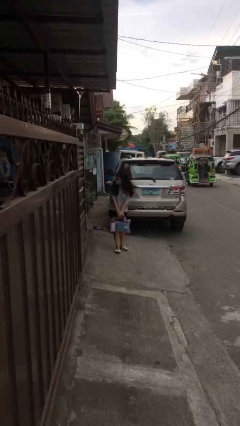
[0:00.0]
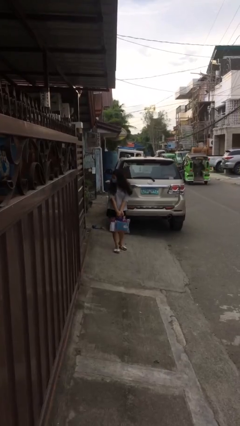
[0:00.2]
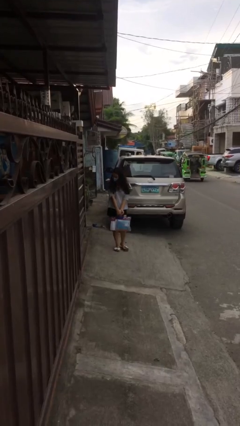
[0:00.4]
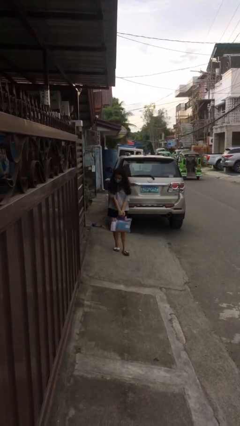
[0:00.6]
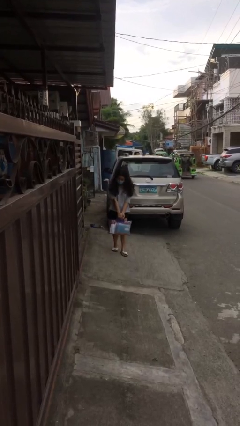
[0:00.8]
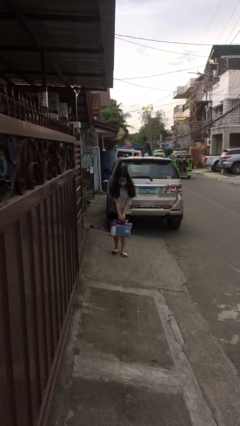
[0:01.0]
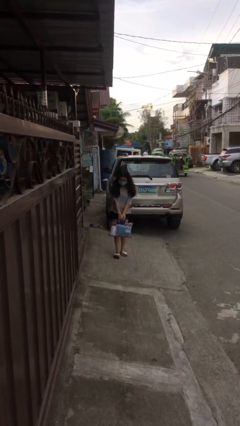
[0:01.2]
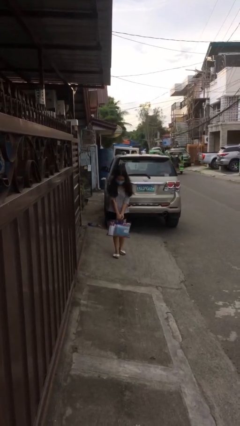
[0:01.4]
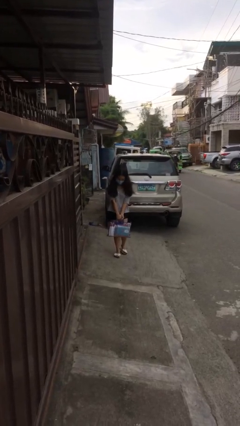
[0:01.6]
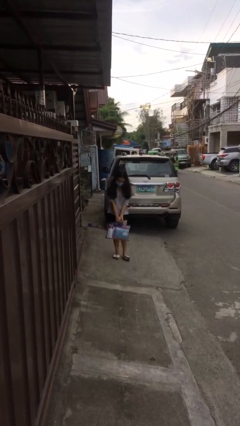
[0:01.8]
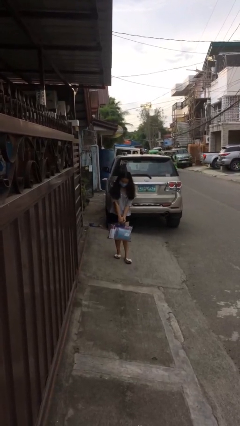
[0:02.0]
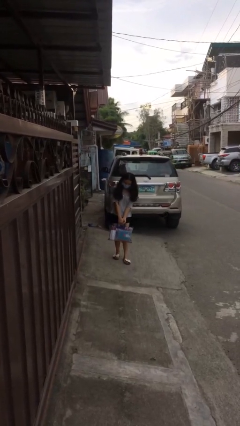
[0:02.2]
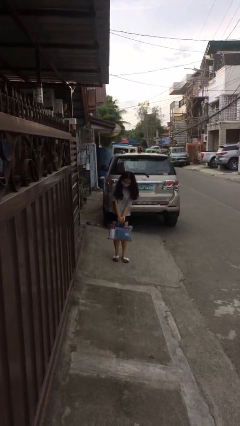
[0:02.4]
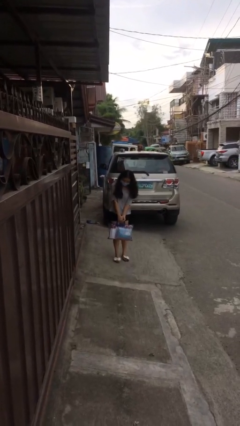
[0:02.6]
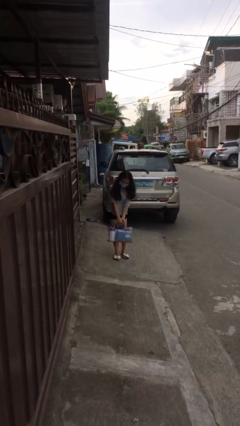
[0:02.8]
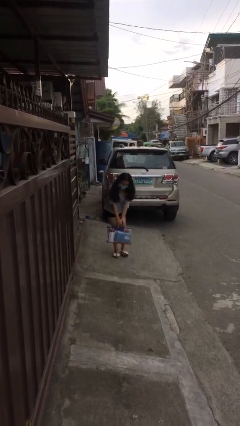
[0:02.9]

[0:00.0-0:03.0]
person carries heavy object

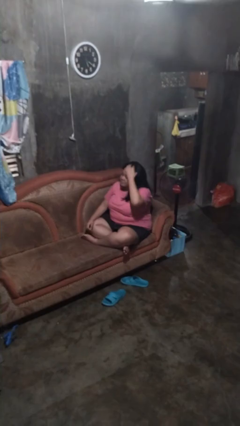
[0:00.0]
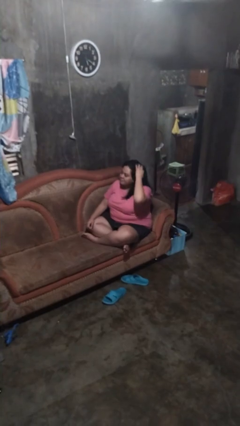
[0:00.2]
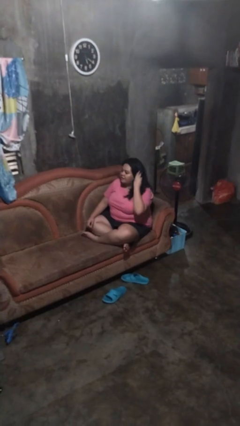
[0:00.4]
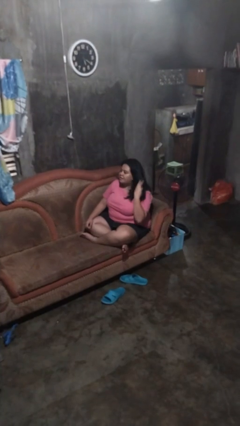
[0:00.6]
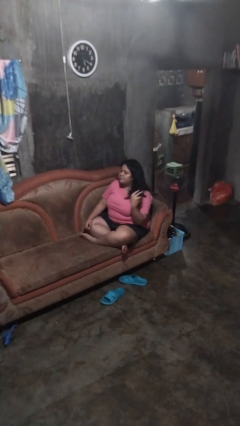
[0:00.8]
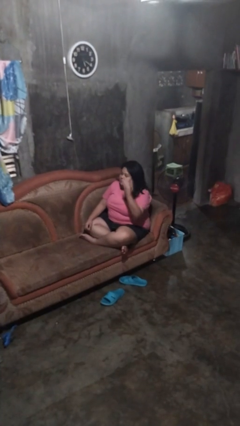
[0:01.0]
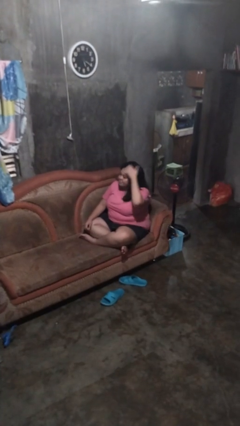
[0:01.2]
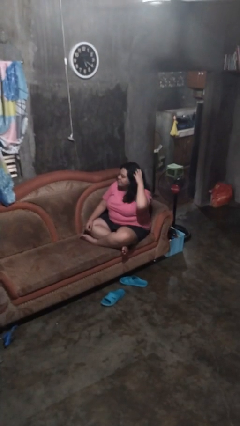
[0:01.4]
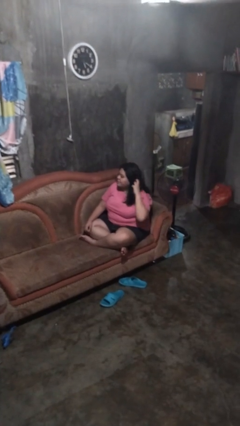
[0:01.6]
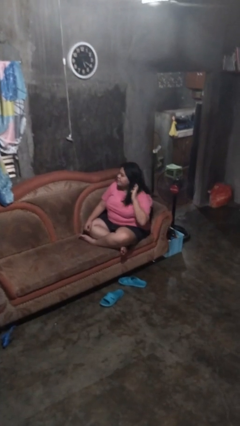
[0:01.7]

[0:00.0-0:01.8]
person strokes hair

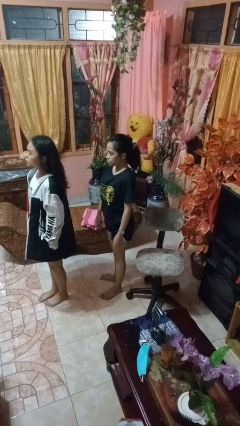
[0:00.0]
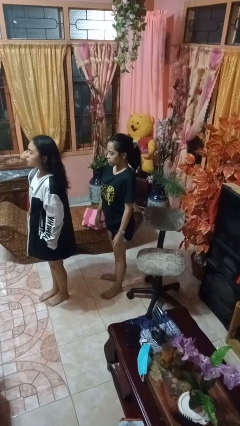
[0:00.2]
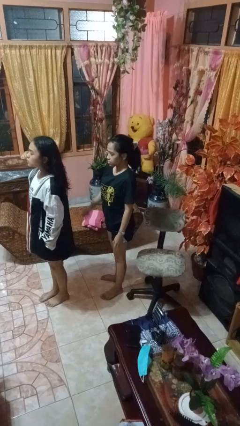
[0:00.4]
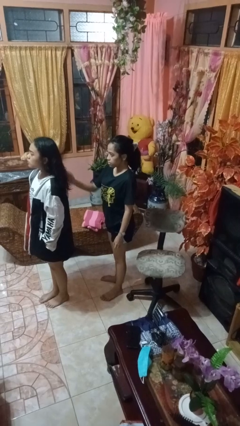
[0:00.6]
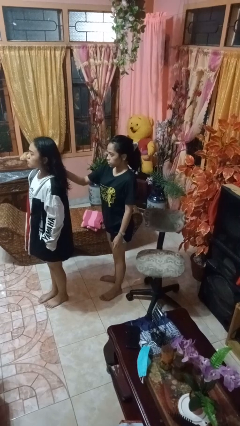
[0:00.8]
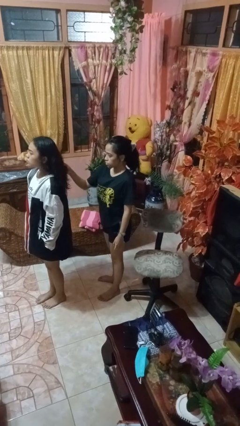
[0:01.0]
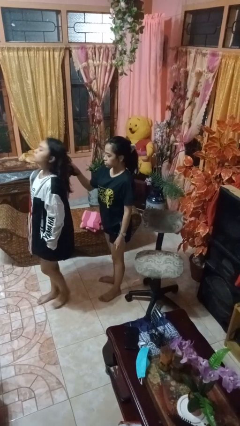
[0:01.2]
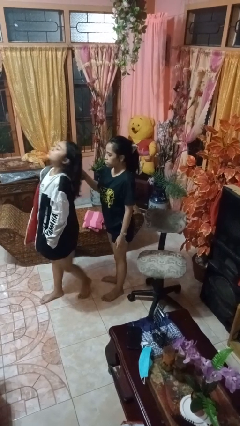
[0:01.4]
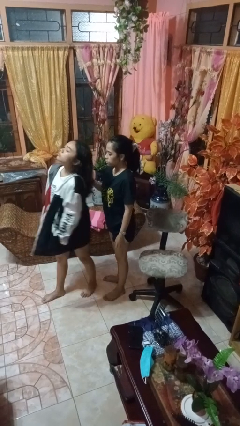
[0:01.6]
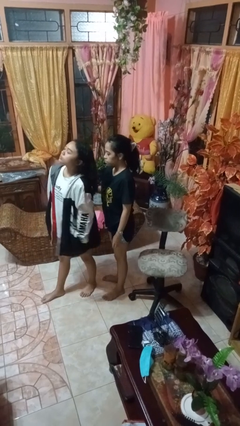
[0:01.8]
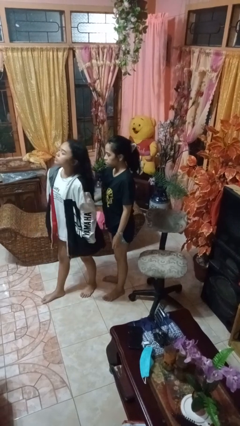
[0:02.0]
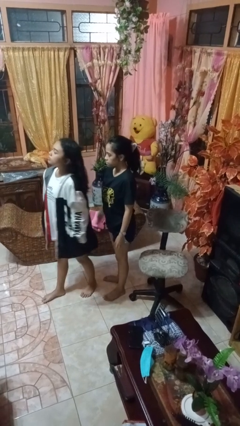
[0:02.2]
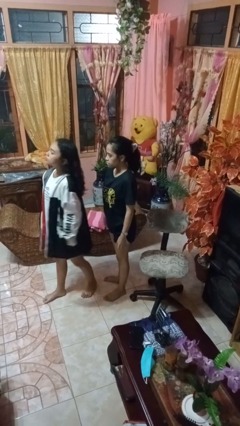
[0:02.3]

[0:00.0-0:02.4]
person grabs person by hair

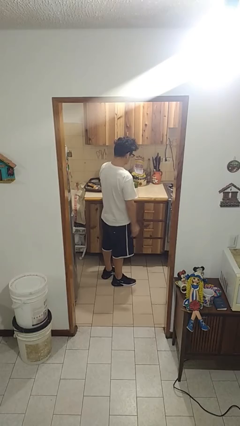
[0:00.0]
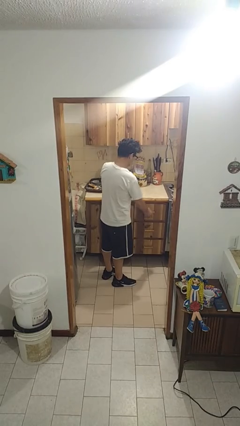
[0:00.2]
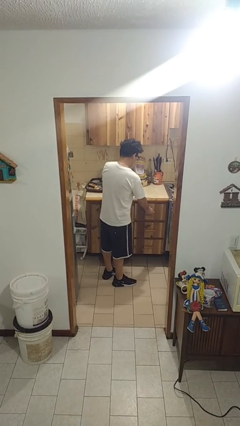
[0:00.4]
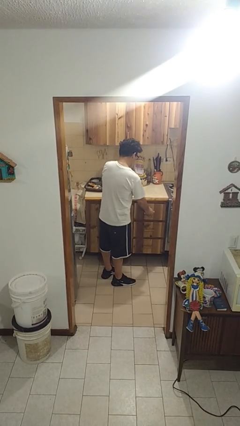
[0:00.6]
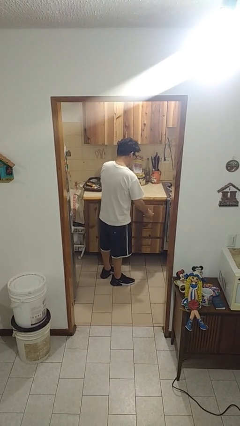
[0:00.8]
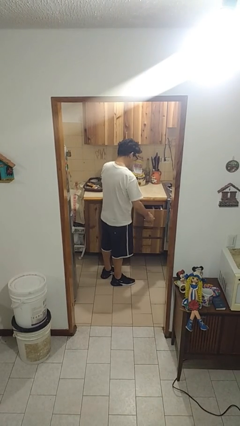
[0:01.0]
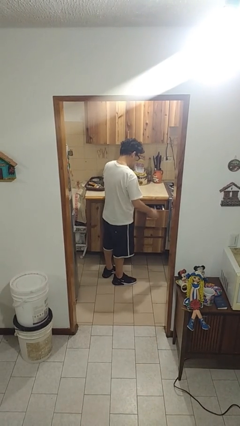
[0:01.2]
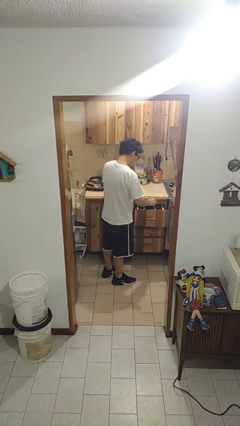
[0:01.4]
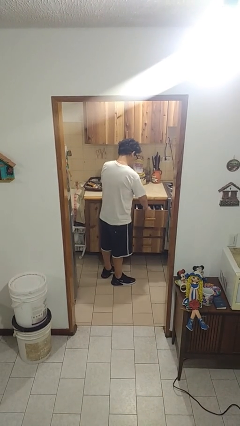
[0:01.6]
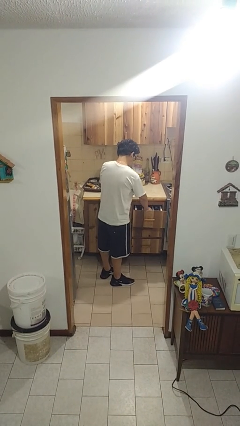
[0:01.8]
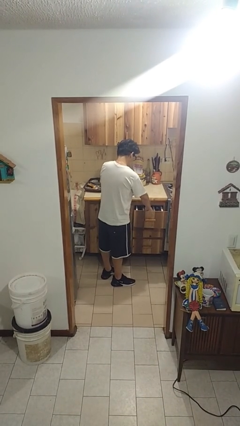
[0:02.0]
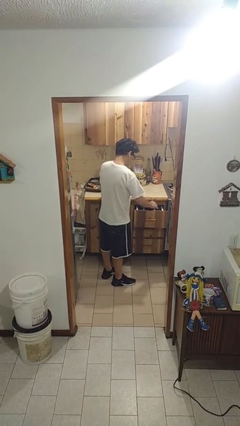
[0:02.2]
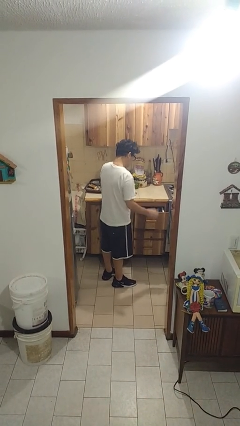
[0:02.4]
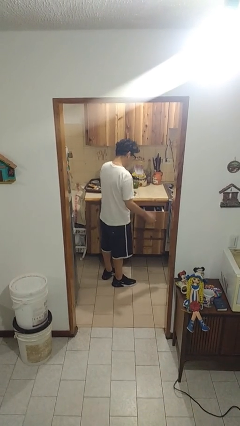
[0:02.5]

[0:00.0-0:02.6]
person searches in kitchen drawer

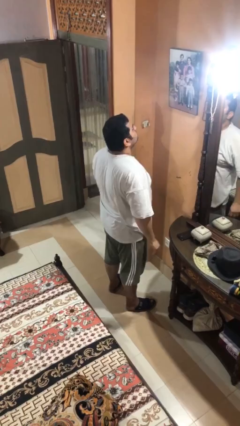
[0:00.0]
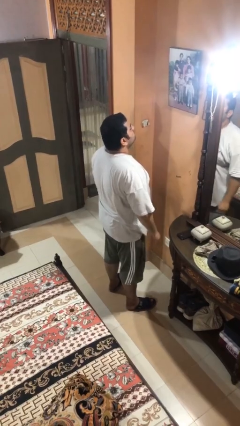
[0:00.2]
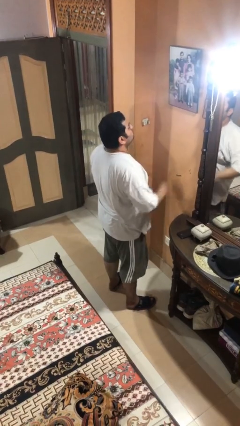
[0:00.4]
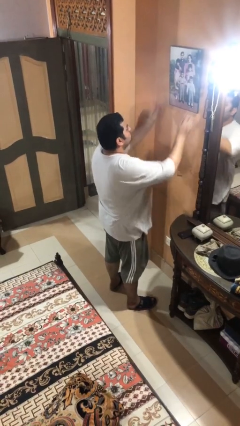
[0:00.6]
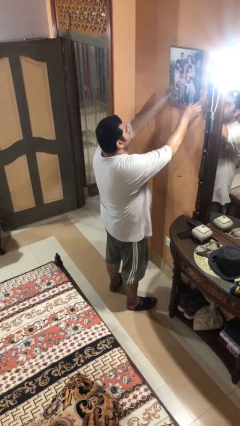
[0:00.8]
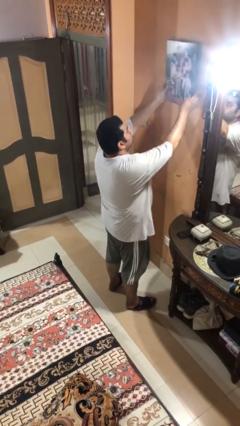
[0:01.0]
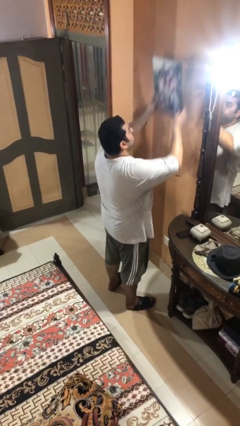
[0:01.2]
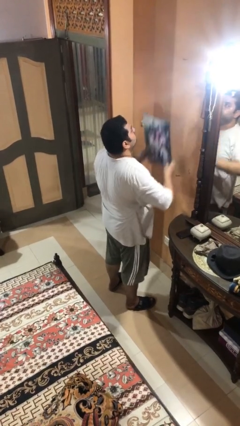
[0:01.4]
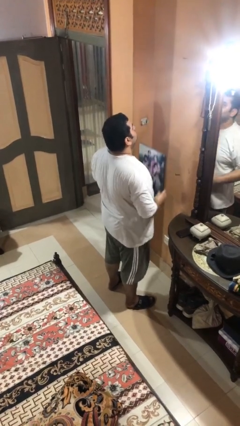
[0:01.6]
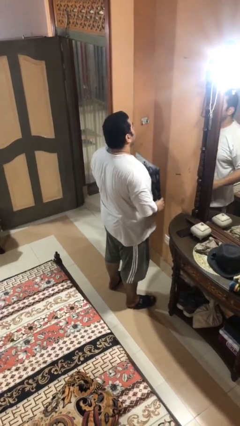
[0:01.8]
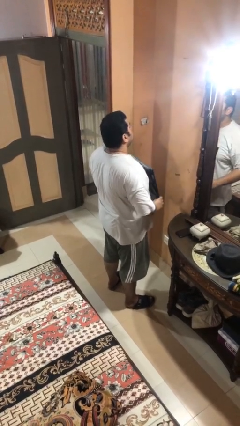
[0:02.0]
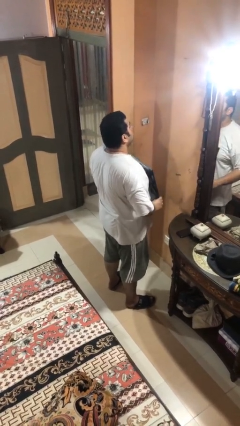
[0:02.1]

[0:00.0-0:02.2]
person takes down picture frame

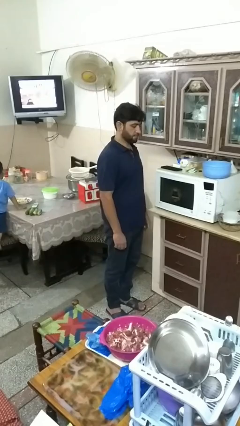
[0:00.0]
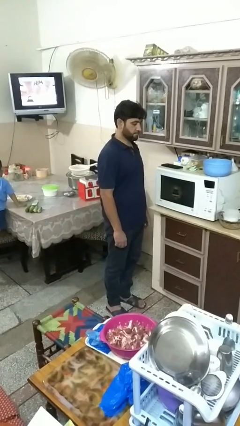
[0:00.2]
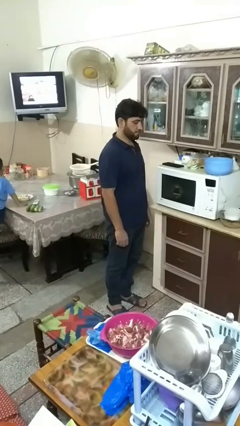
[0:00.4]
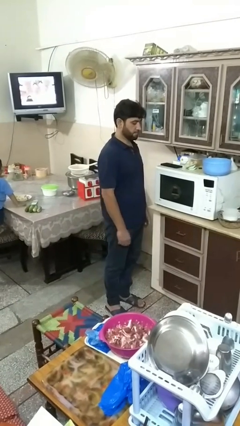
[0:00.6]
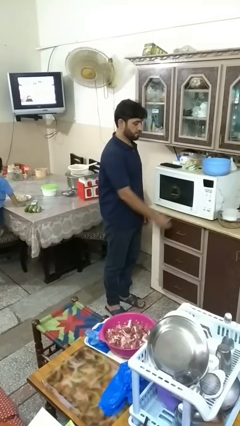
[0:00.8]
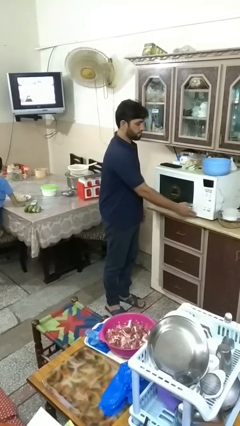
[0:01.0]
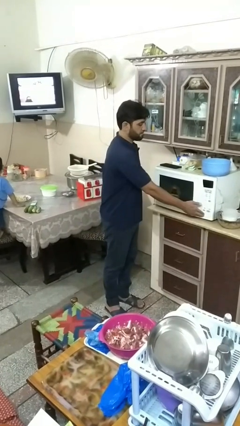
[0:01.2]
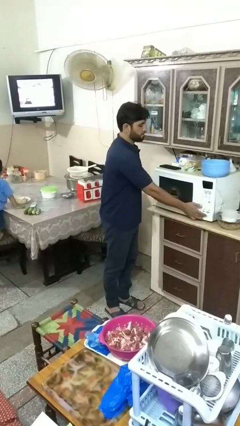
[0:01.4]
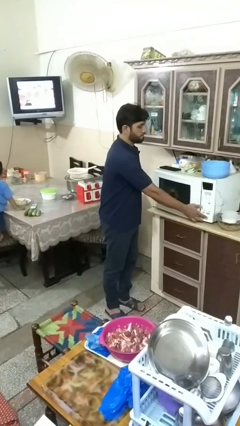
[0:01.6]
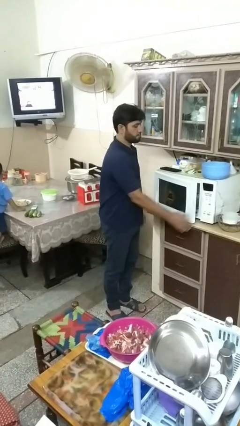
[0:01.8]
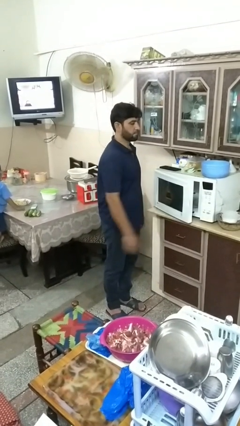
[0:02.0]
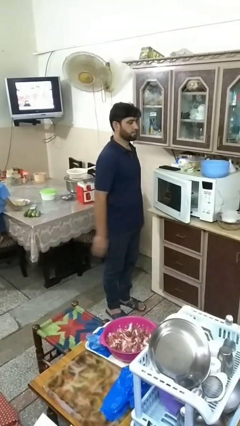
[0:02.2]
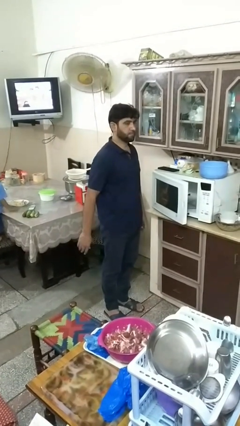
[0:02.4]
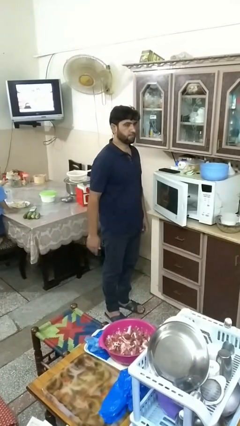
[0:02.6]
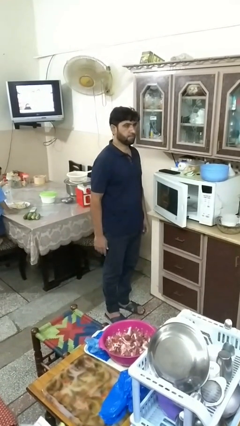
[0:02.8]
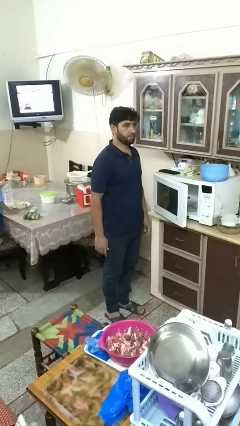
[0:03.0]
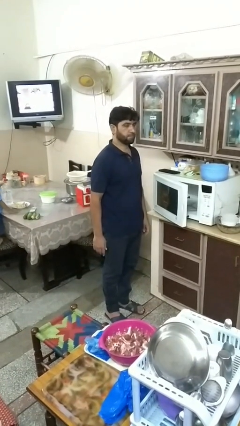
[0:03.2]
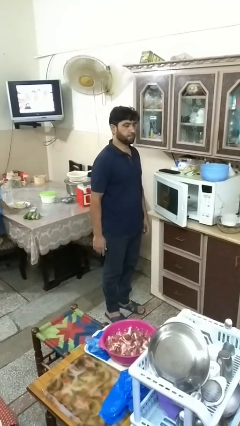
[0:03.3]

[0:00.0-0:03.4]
person opens oven door

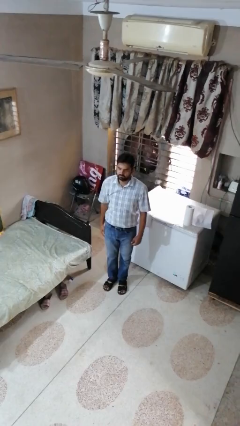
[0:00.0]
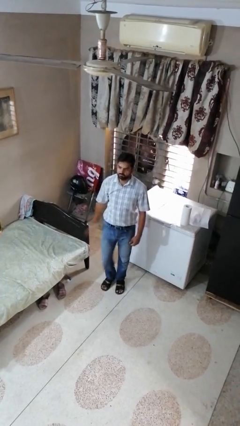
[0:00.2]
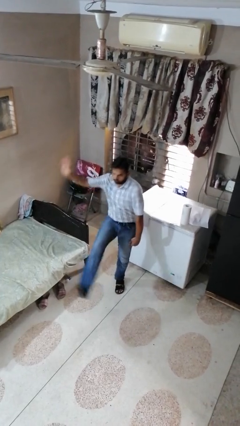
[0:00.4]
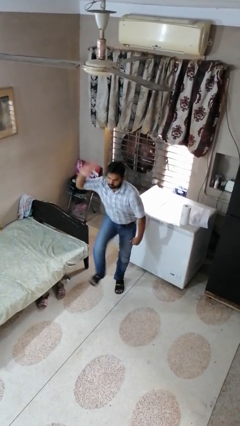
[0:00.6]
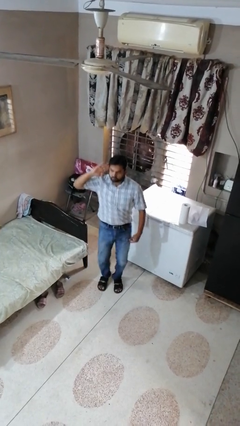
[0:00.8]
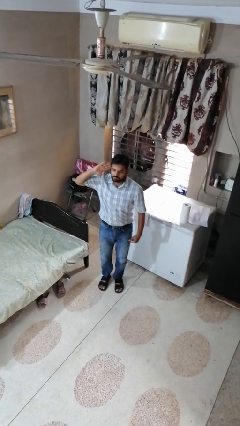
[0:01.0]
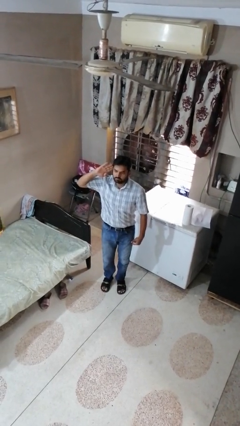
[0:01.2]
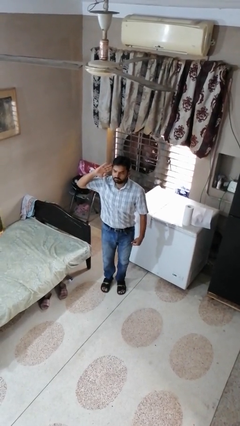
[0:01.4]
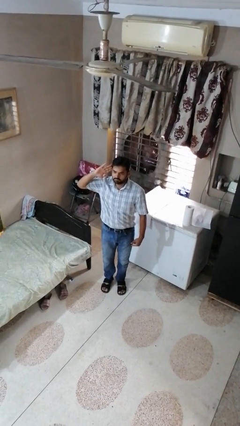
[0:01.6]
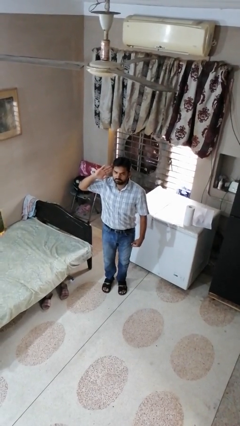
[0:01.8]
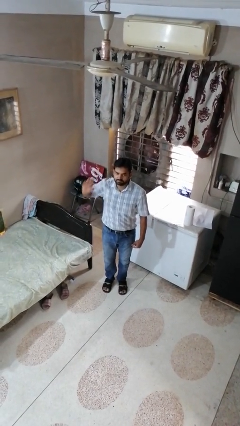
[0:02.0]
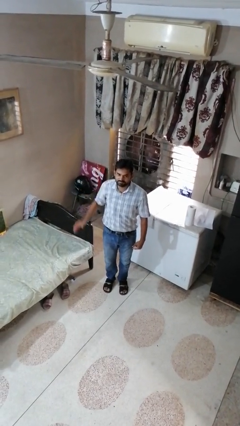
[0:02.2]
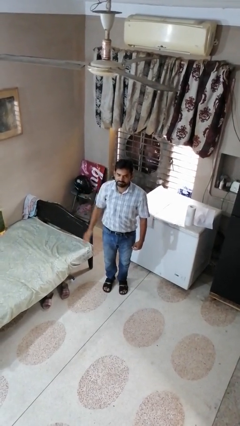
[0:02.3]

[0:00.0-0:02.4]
person salutes
